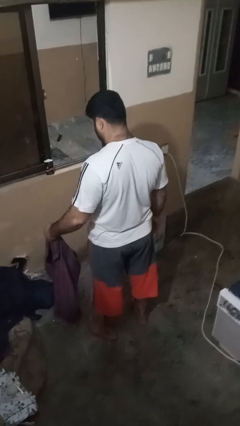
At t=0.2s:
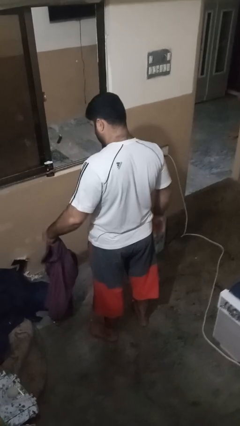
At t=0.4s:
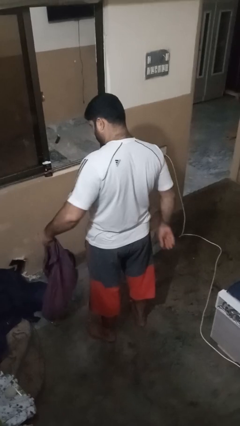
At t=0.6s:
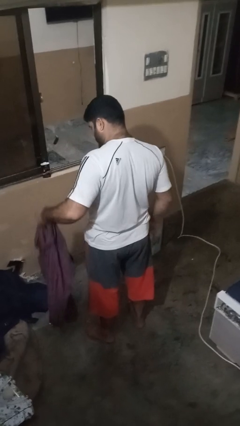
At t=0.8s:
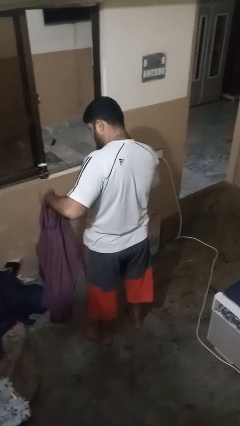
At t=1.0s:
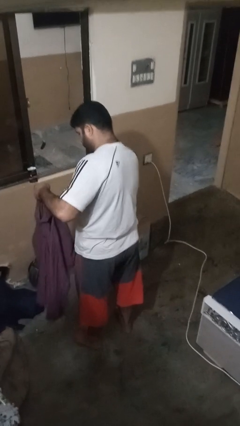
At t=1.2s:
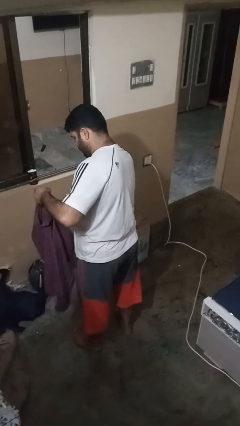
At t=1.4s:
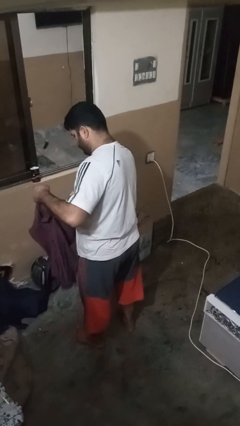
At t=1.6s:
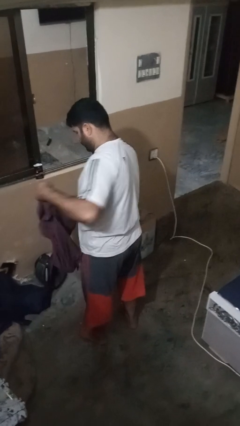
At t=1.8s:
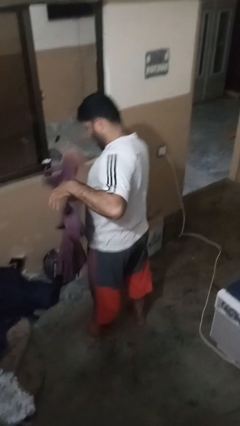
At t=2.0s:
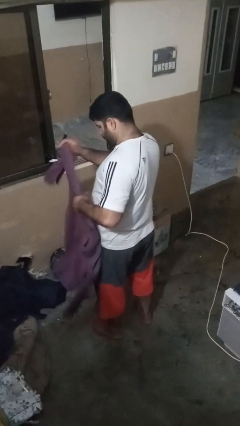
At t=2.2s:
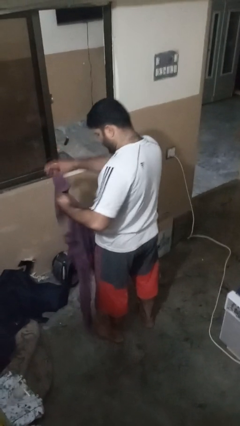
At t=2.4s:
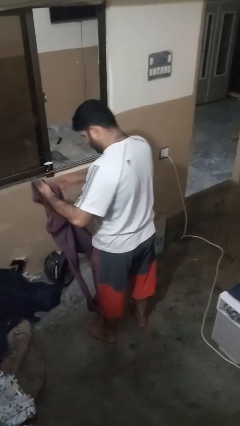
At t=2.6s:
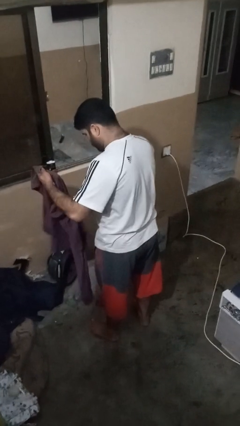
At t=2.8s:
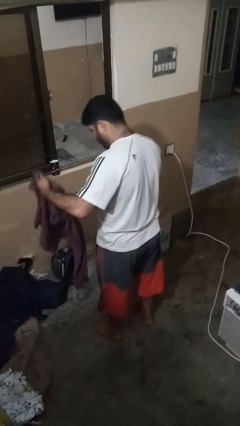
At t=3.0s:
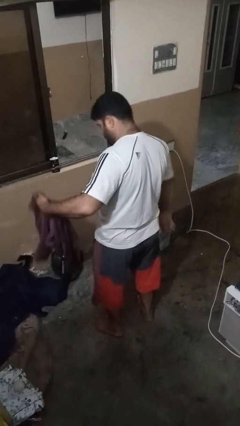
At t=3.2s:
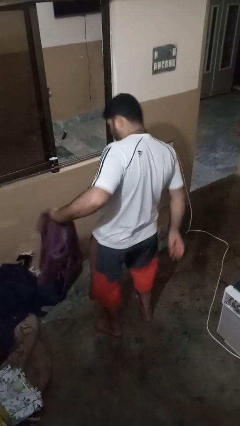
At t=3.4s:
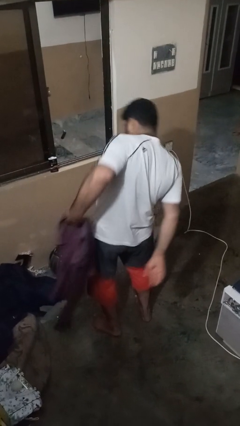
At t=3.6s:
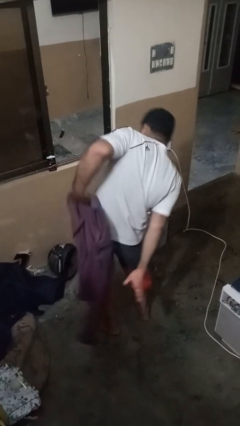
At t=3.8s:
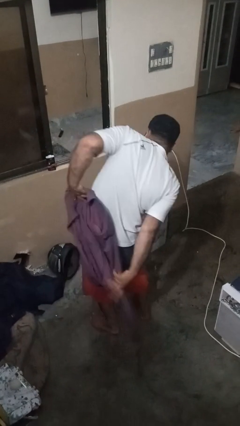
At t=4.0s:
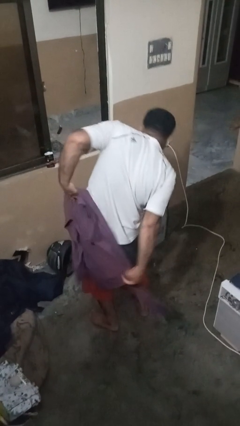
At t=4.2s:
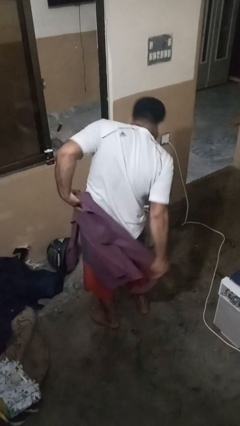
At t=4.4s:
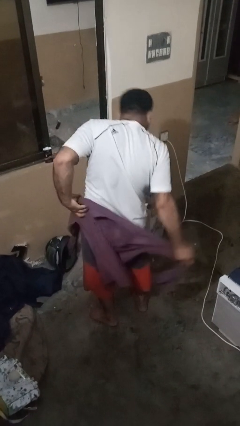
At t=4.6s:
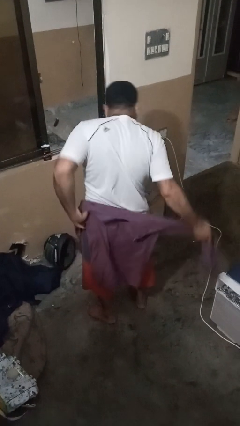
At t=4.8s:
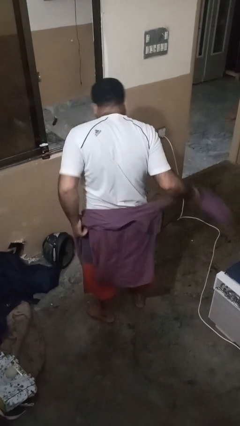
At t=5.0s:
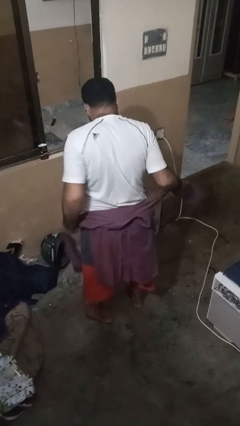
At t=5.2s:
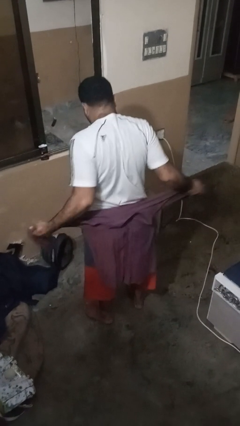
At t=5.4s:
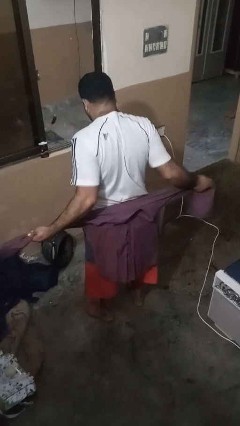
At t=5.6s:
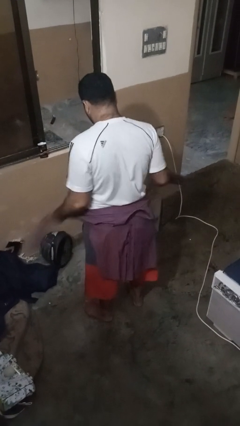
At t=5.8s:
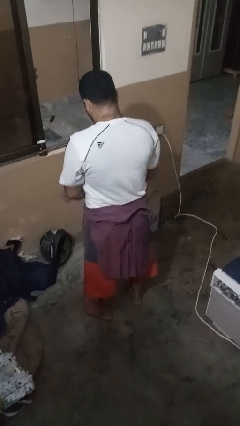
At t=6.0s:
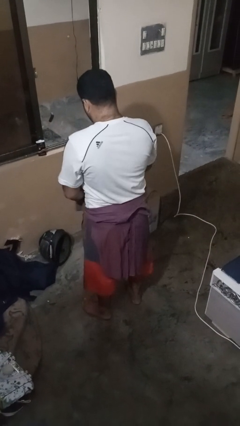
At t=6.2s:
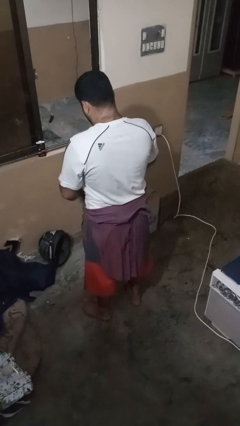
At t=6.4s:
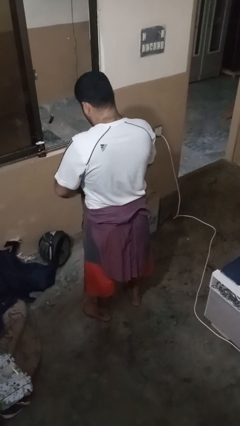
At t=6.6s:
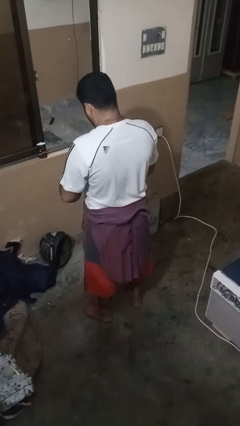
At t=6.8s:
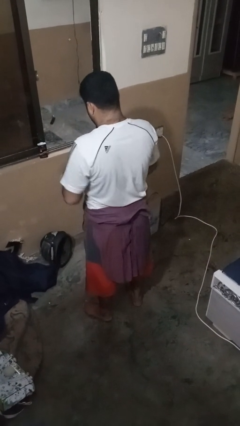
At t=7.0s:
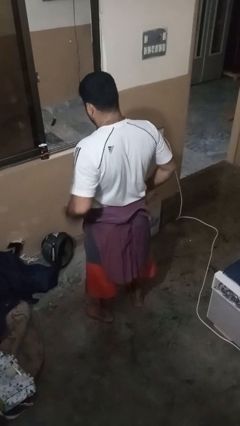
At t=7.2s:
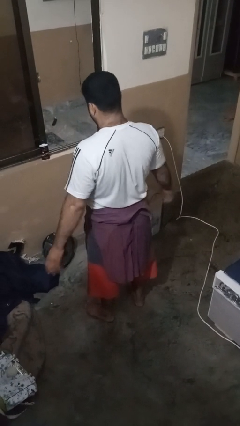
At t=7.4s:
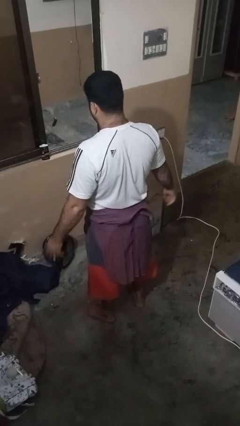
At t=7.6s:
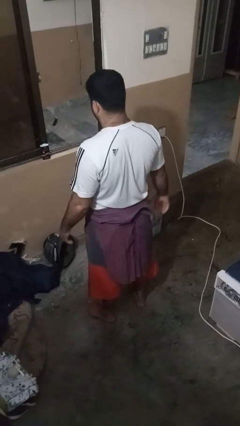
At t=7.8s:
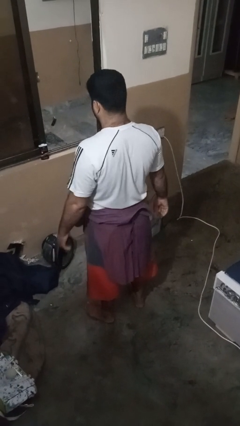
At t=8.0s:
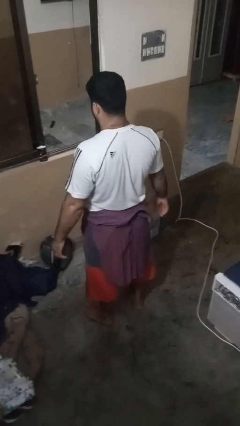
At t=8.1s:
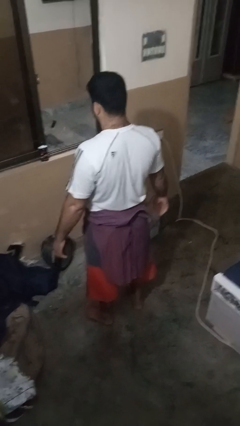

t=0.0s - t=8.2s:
person ties jacket around waist

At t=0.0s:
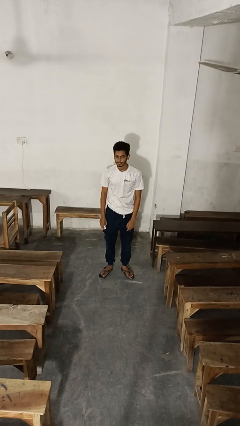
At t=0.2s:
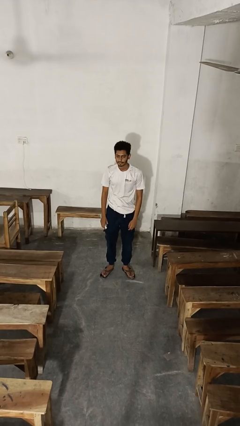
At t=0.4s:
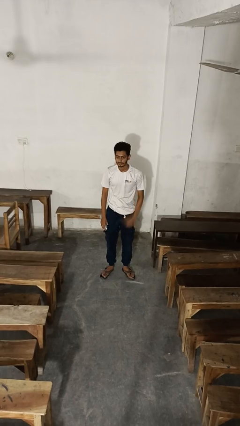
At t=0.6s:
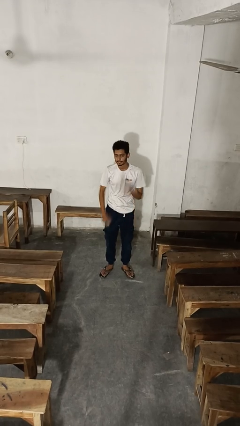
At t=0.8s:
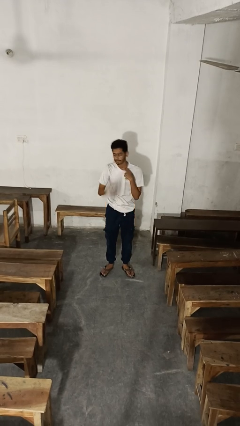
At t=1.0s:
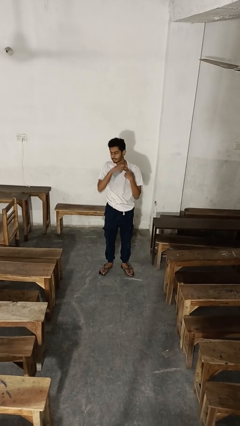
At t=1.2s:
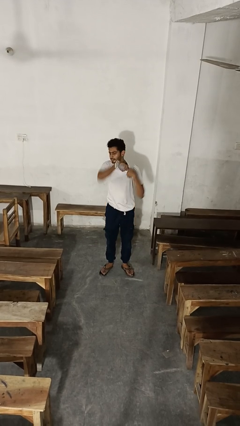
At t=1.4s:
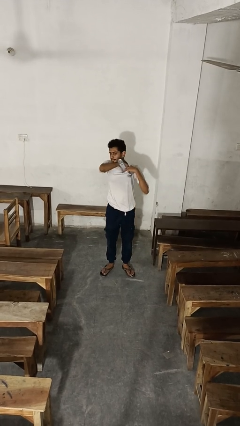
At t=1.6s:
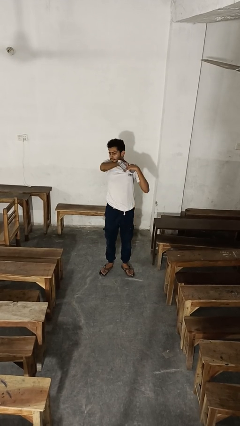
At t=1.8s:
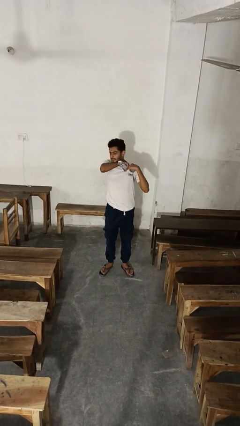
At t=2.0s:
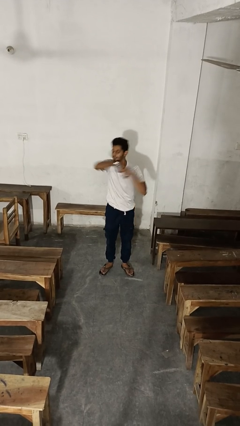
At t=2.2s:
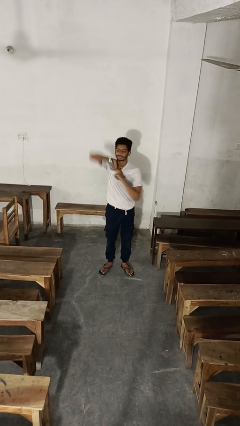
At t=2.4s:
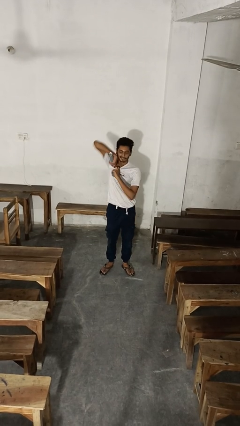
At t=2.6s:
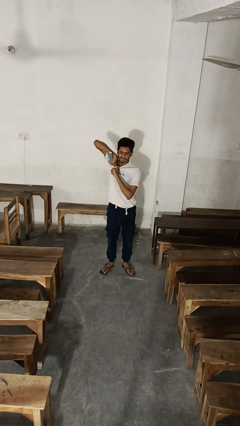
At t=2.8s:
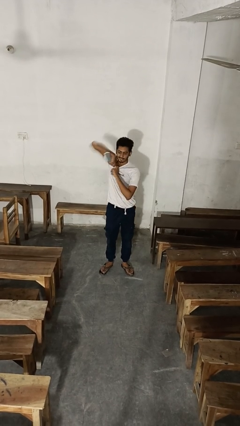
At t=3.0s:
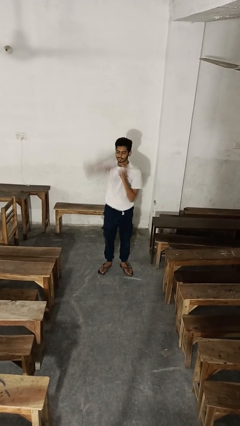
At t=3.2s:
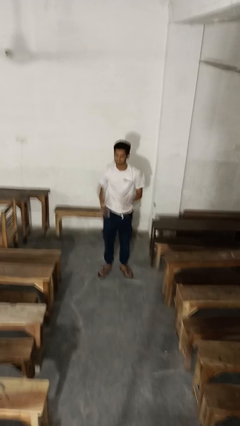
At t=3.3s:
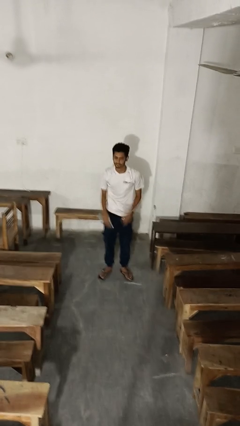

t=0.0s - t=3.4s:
person applies deodorant

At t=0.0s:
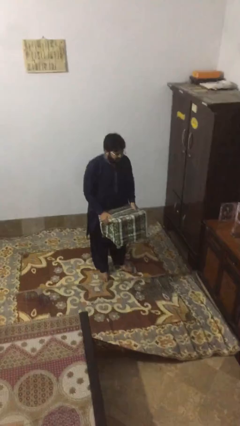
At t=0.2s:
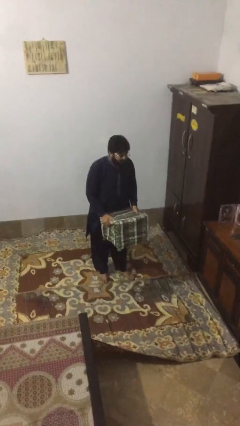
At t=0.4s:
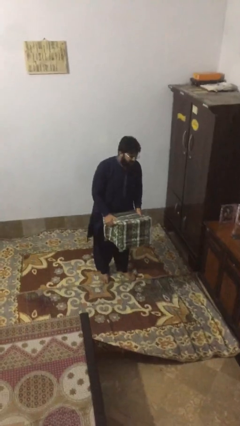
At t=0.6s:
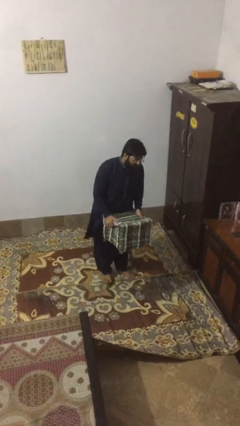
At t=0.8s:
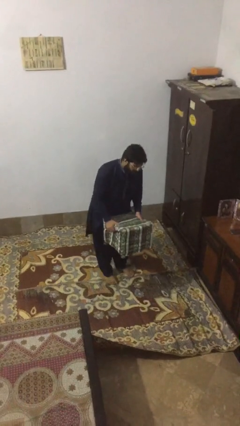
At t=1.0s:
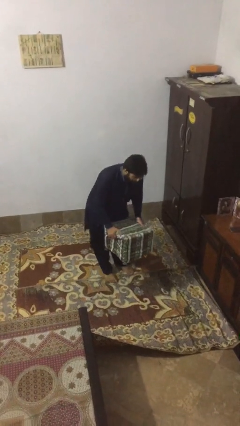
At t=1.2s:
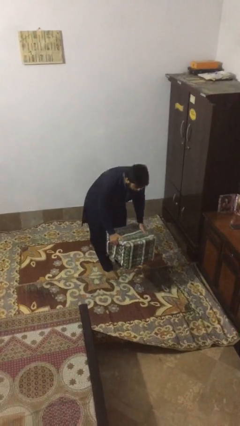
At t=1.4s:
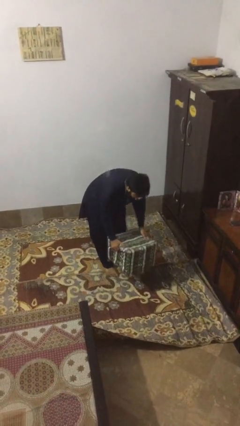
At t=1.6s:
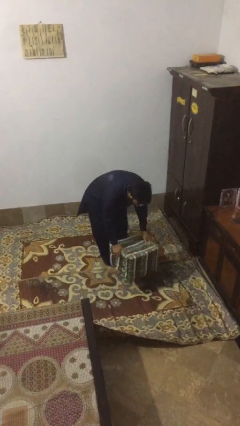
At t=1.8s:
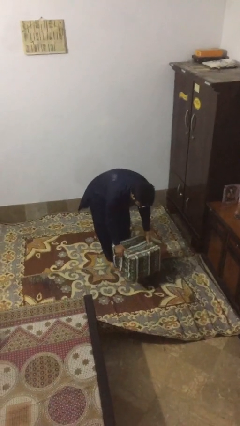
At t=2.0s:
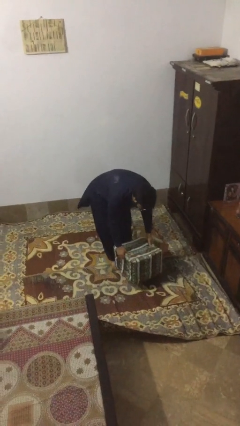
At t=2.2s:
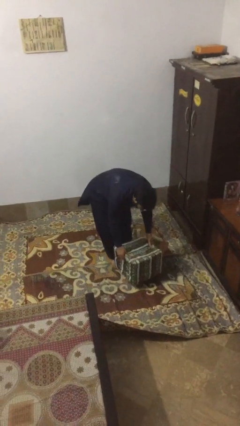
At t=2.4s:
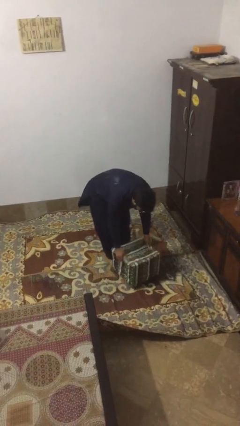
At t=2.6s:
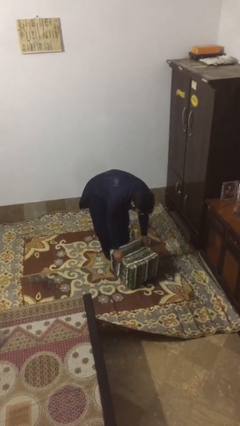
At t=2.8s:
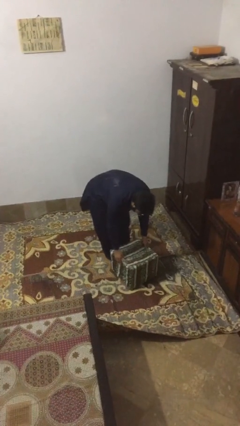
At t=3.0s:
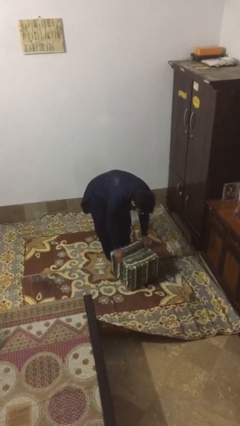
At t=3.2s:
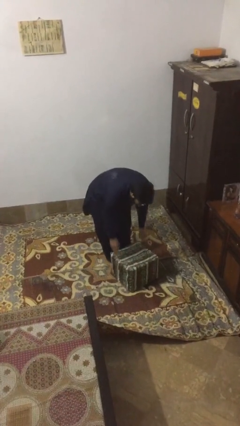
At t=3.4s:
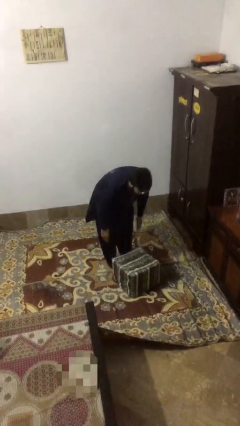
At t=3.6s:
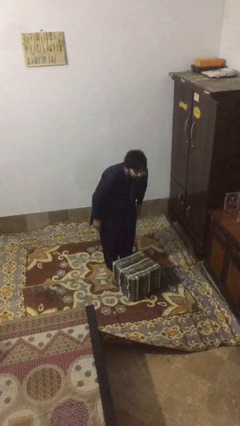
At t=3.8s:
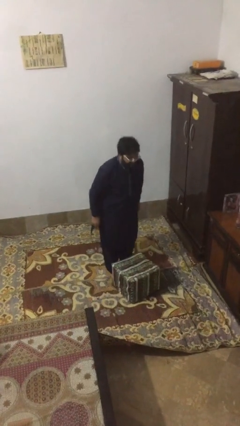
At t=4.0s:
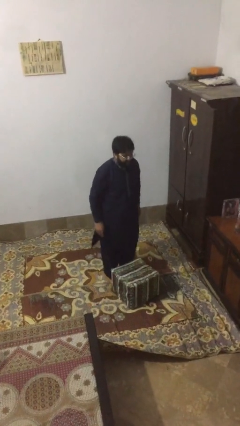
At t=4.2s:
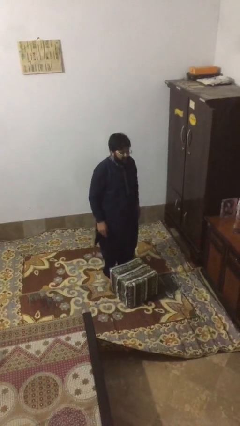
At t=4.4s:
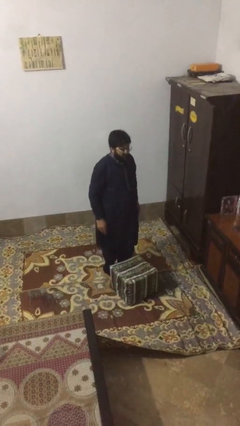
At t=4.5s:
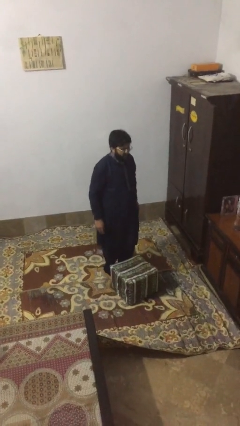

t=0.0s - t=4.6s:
person puts down object on floor

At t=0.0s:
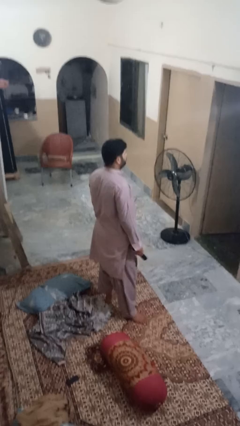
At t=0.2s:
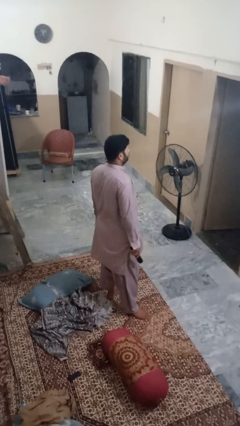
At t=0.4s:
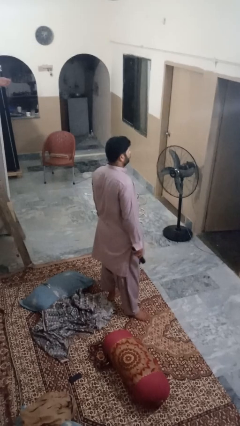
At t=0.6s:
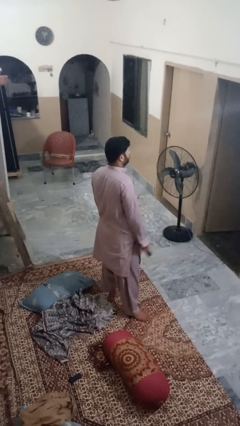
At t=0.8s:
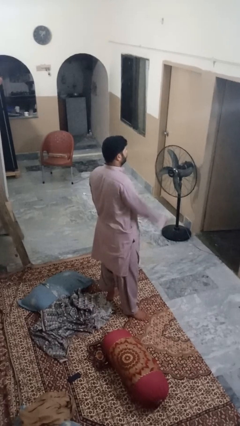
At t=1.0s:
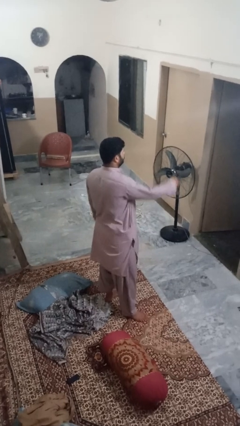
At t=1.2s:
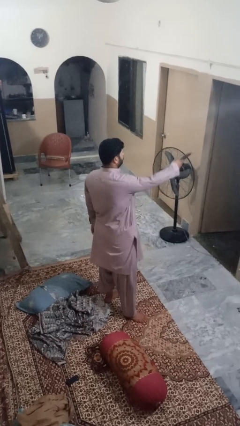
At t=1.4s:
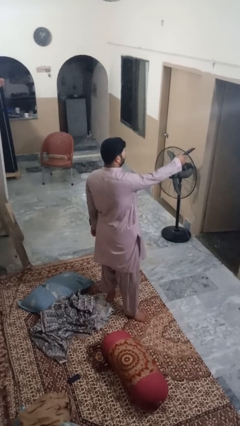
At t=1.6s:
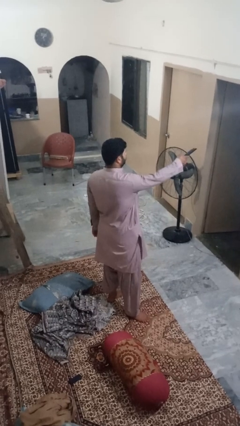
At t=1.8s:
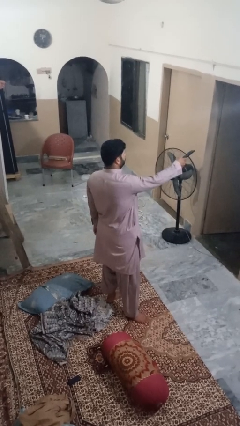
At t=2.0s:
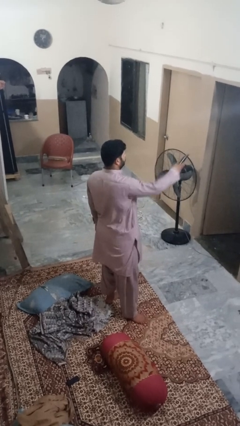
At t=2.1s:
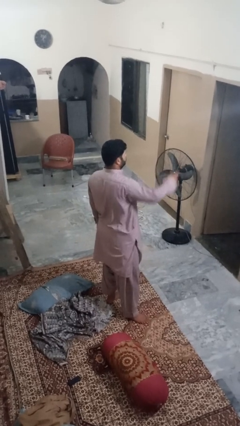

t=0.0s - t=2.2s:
person uses television remote
